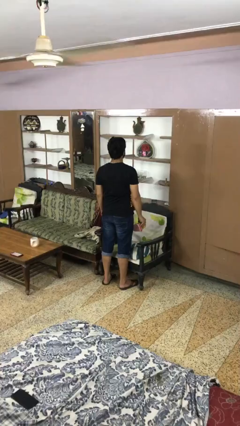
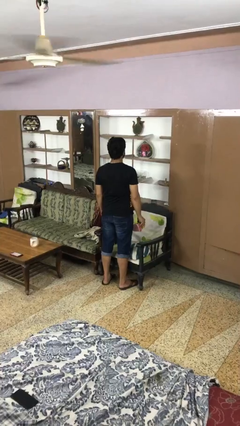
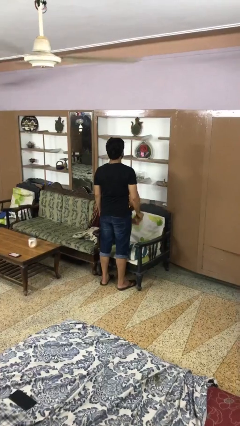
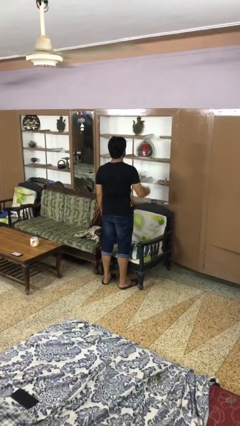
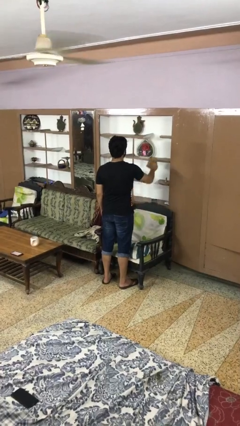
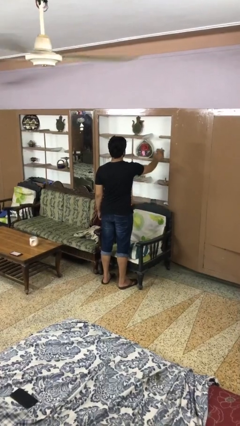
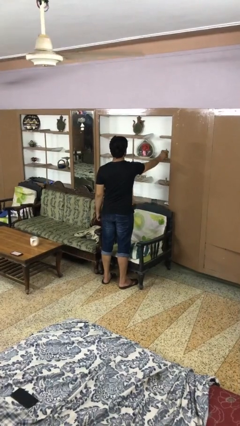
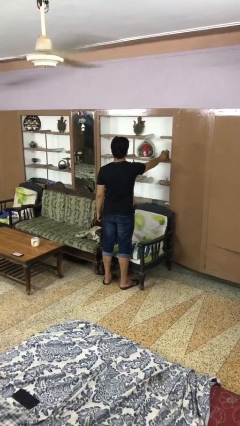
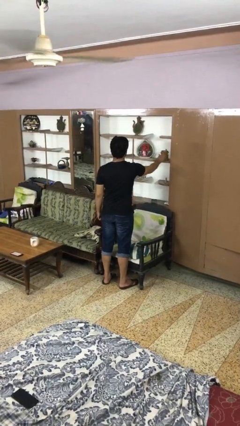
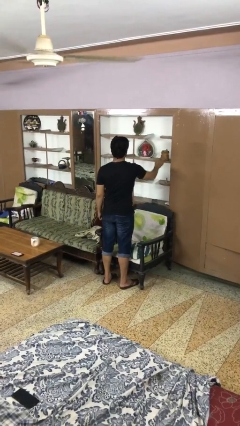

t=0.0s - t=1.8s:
person puts down object on shelf

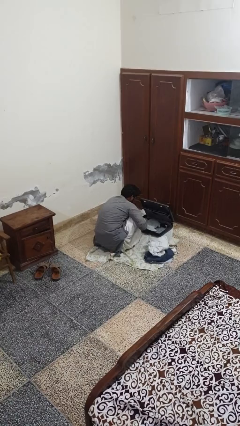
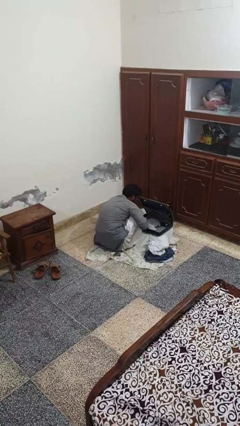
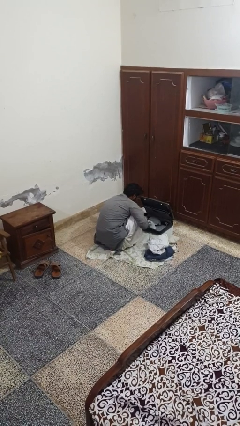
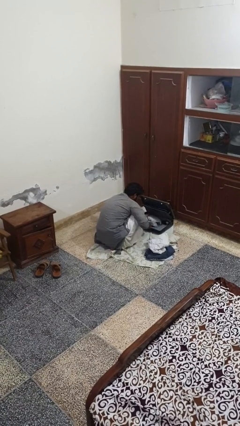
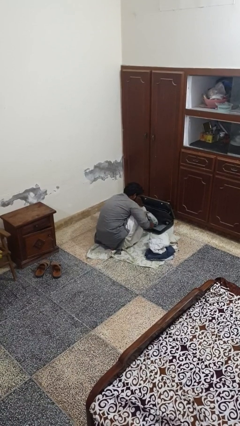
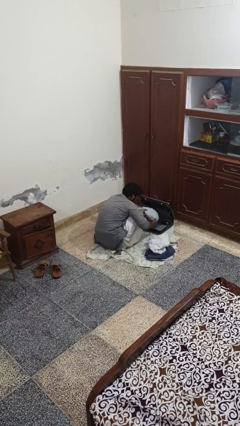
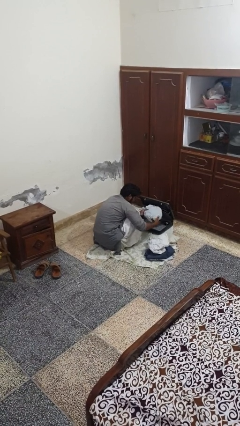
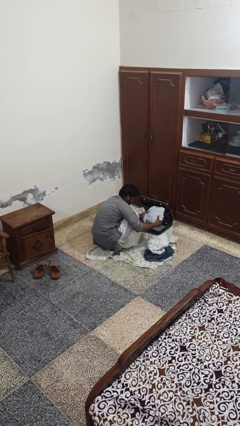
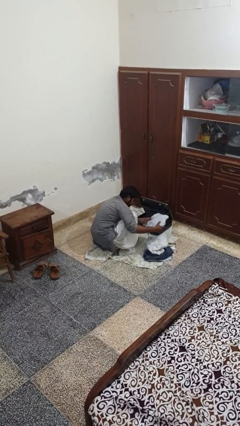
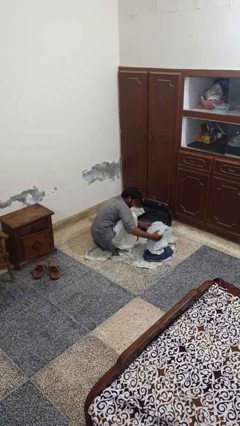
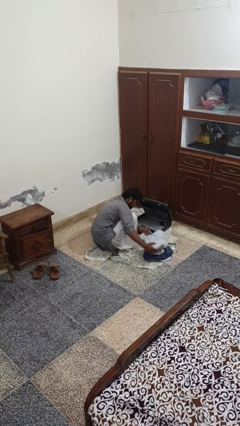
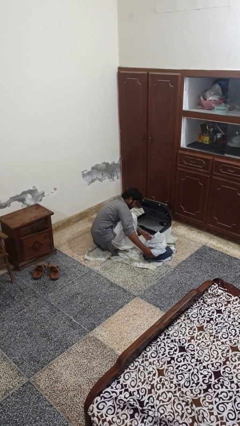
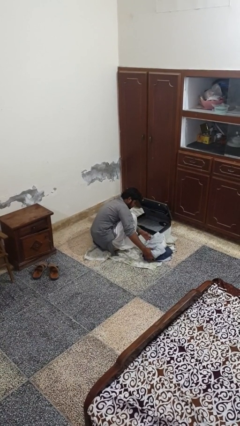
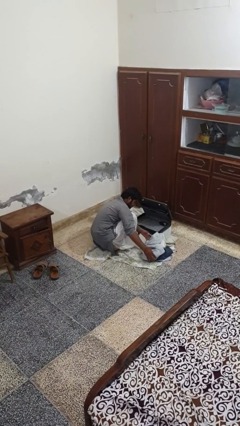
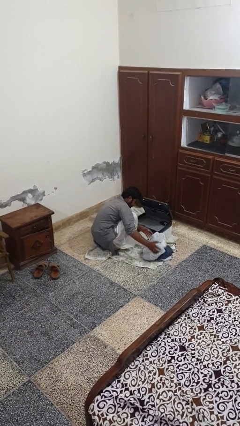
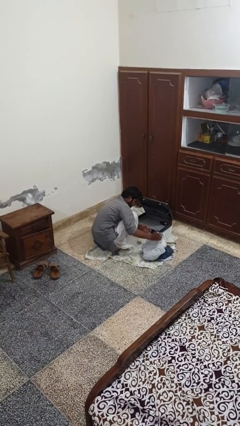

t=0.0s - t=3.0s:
person unloads clothes from suitcase

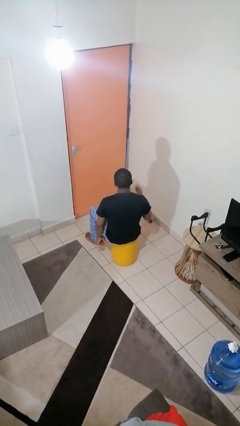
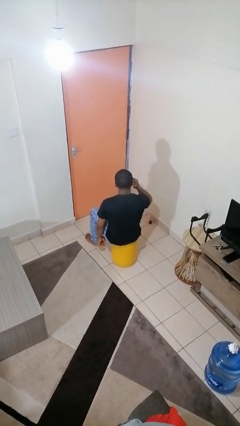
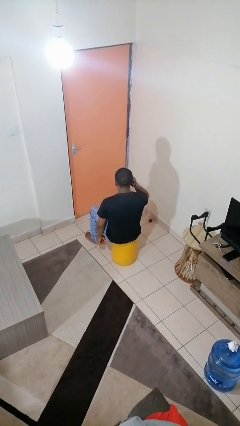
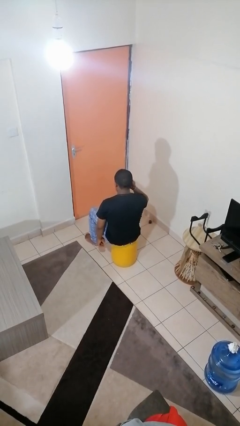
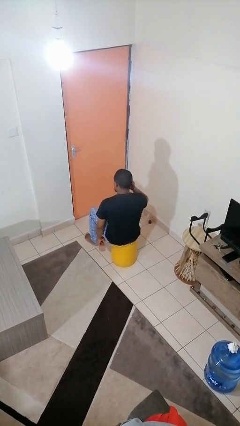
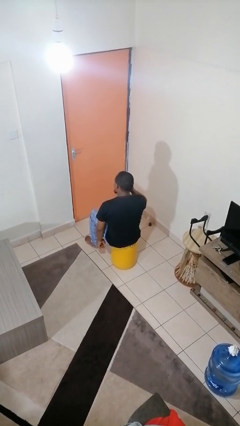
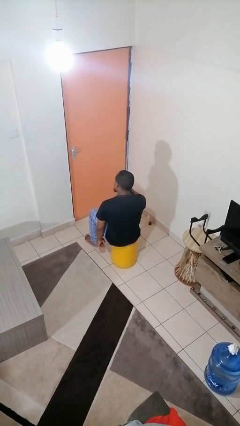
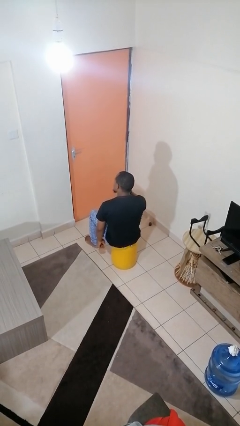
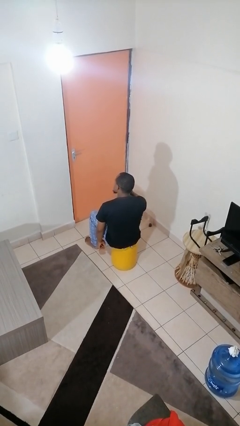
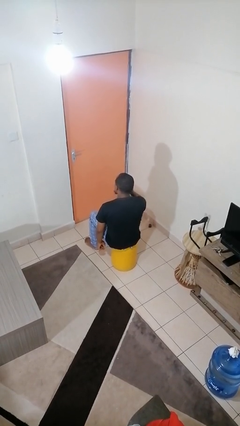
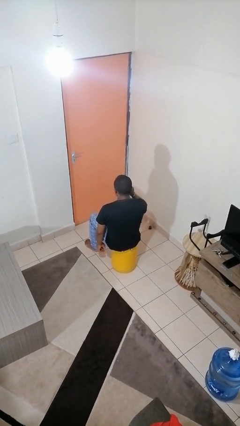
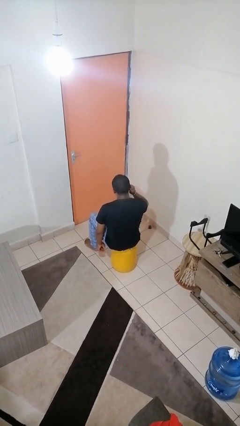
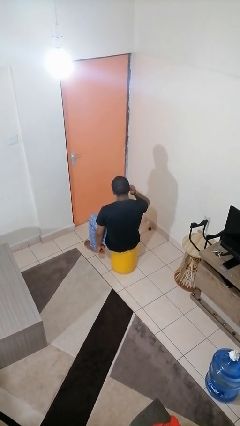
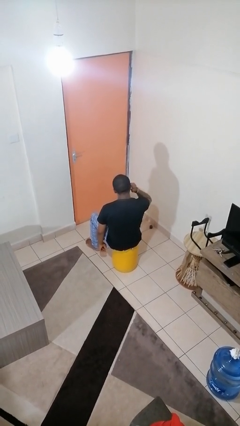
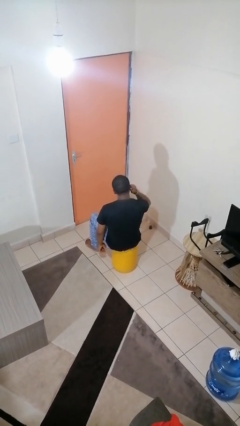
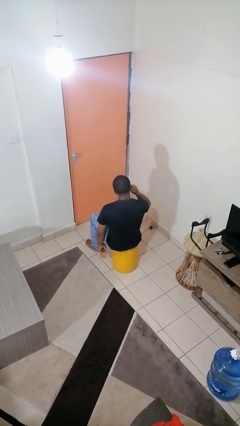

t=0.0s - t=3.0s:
person touches earlobe

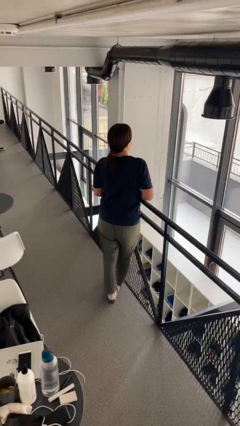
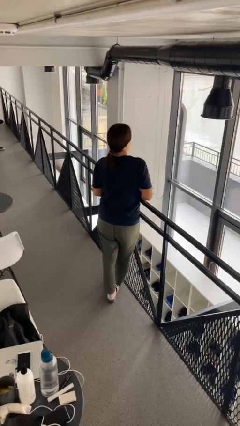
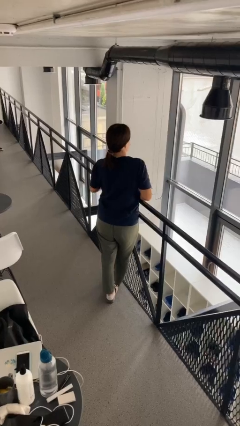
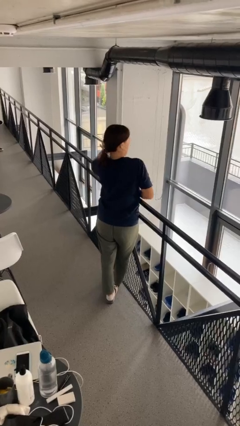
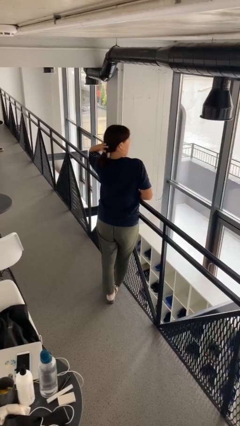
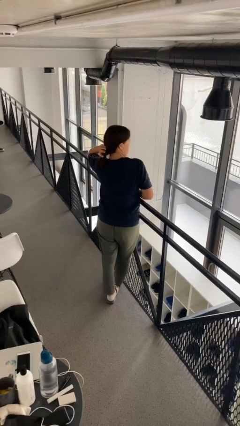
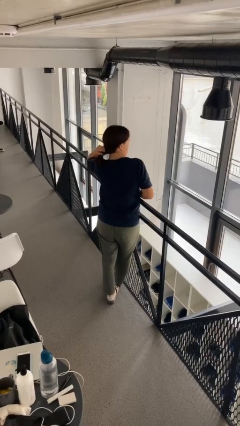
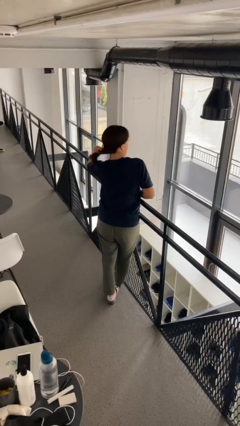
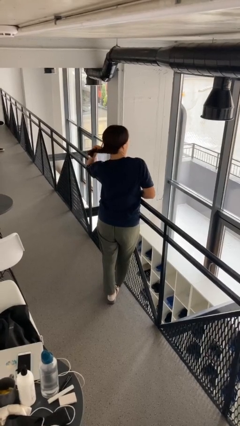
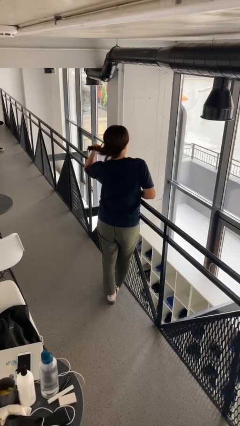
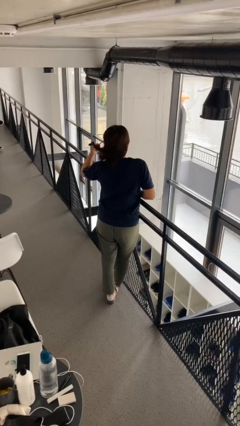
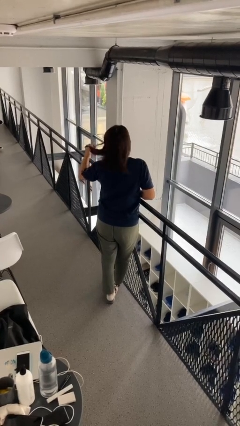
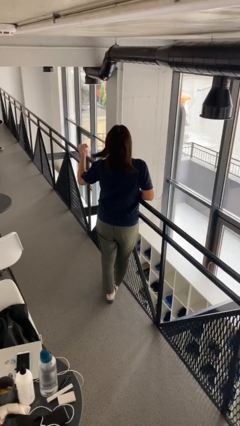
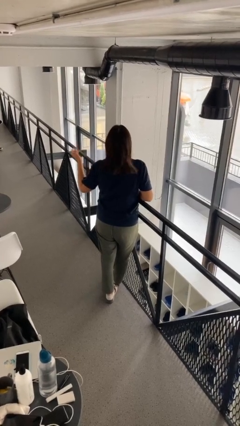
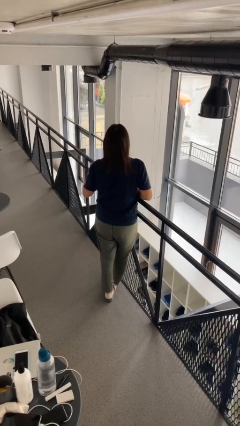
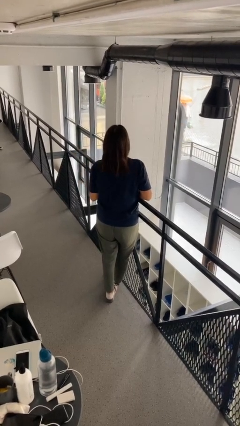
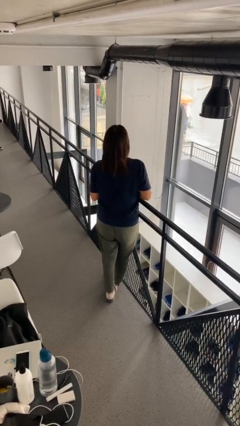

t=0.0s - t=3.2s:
person takes off hairtie

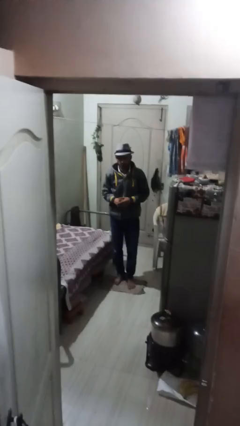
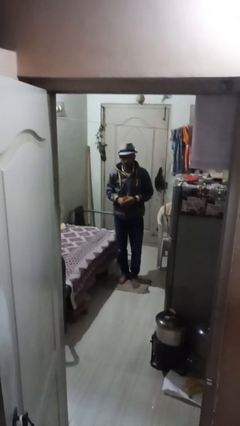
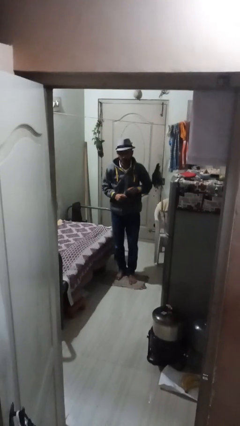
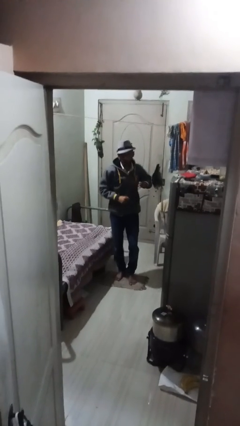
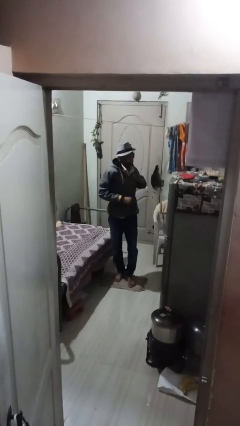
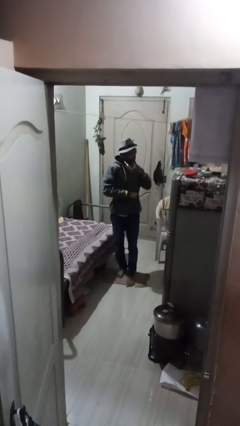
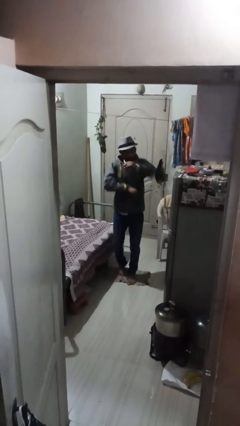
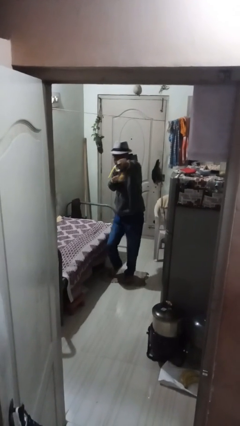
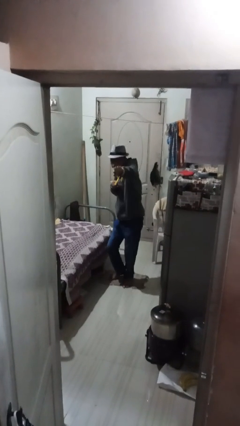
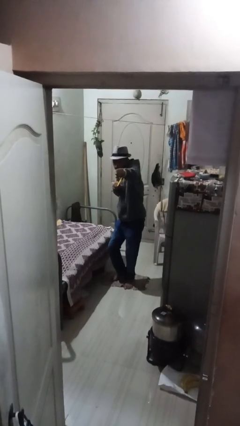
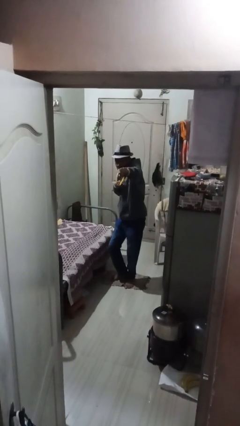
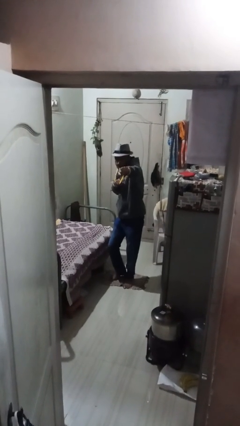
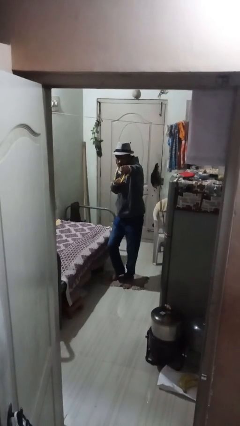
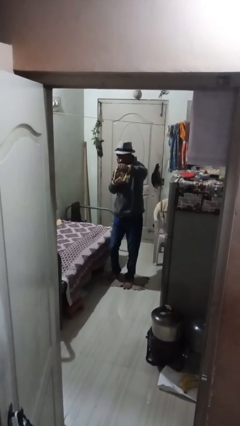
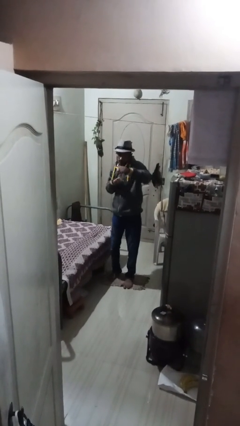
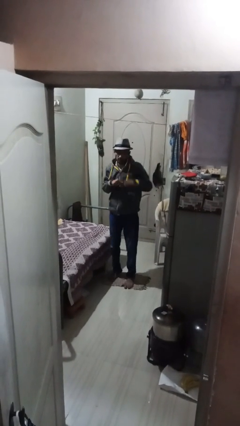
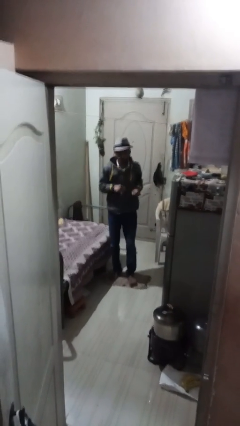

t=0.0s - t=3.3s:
person punches

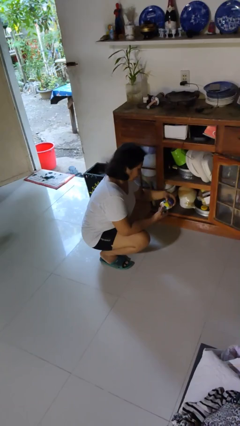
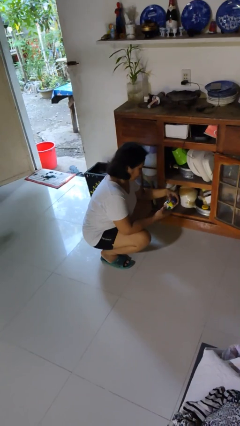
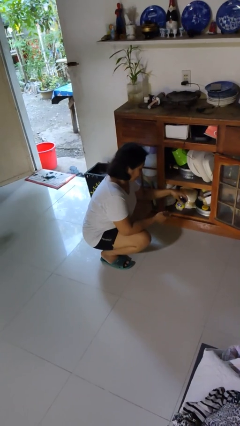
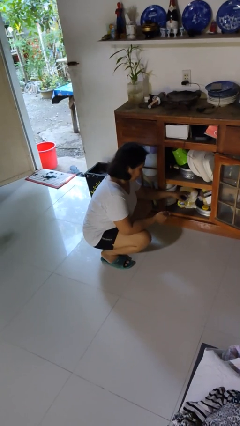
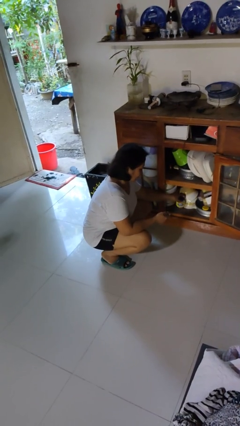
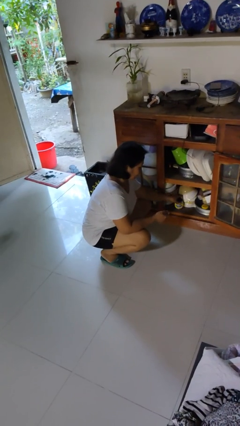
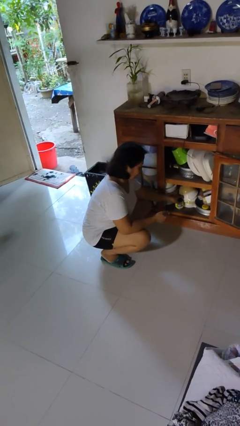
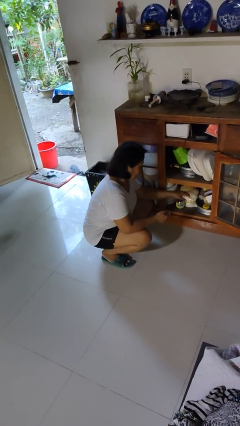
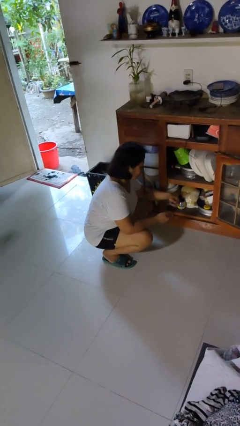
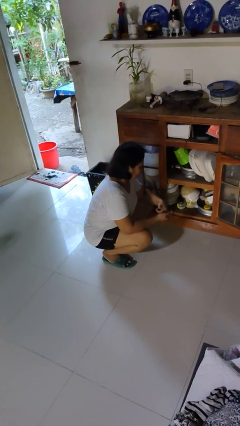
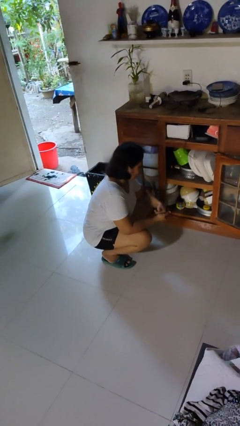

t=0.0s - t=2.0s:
person puts down object into cabinet

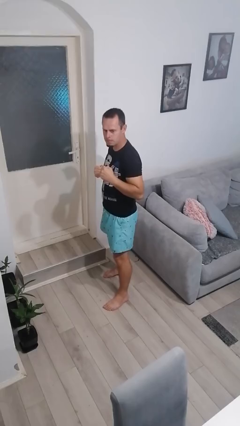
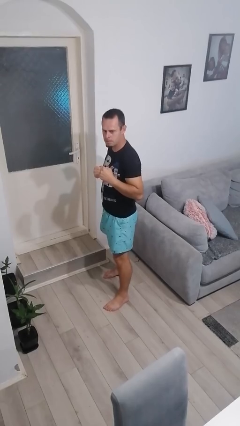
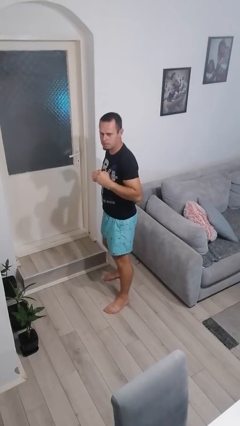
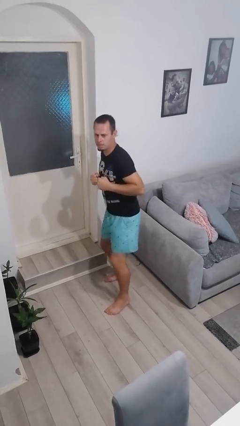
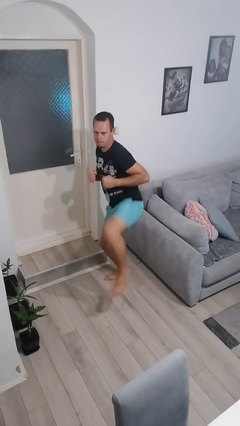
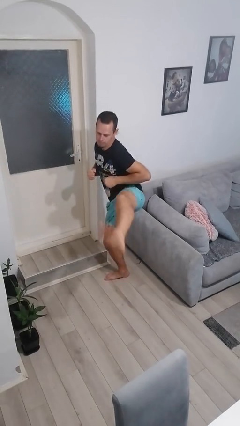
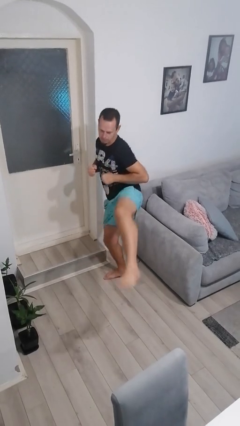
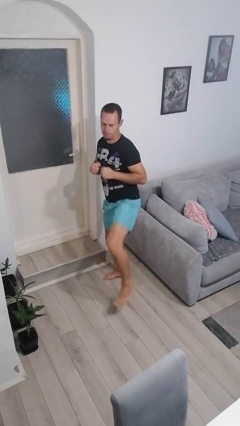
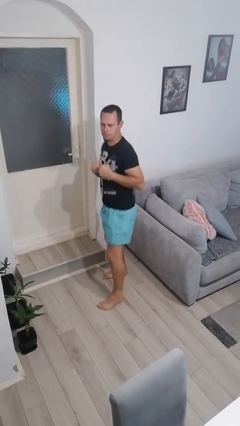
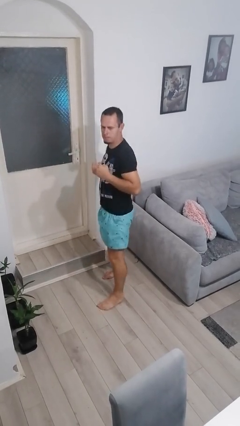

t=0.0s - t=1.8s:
person karate kicks
